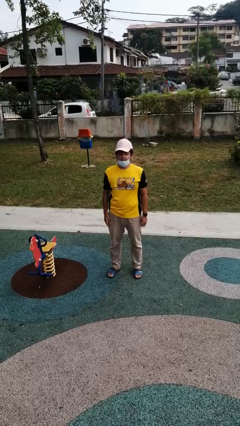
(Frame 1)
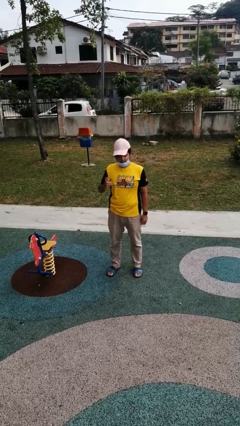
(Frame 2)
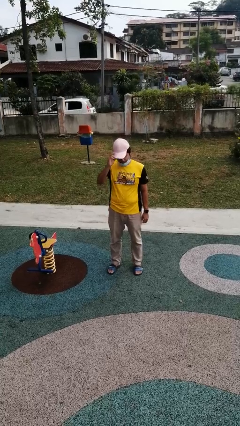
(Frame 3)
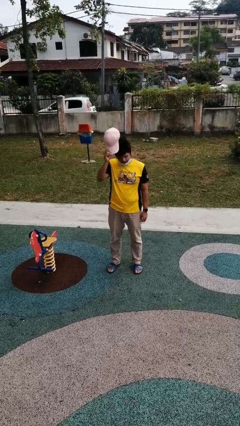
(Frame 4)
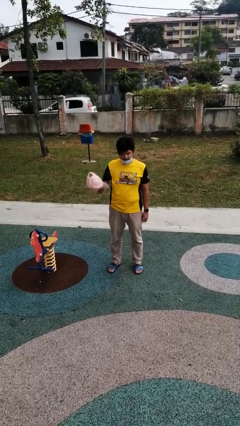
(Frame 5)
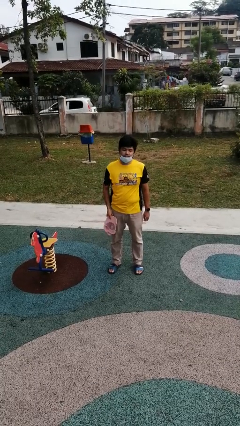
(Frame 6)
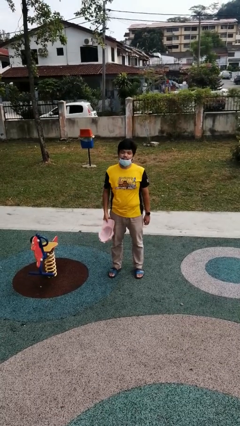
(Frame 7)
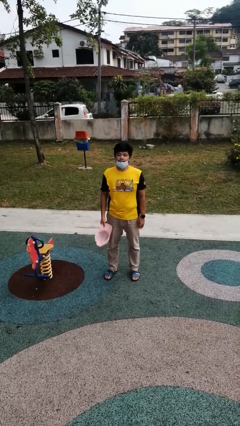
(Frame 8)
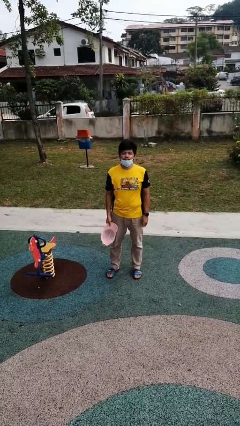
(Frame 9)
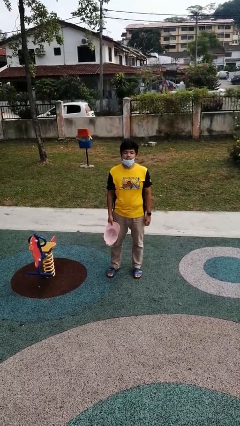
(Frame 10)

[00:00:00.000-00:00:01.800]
person takes off hat

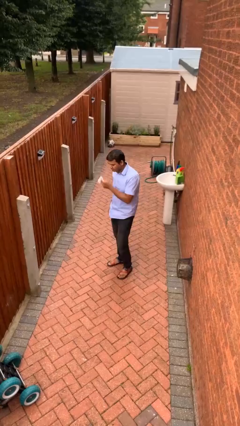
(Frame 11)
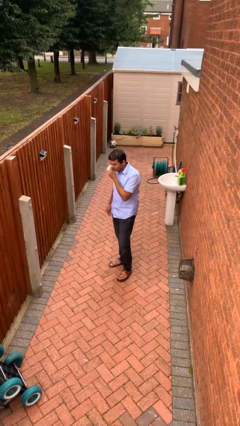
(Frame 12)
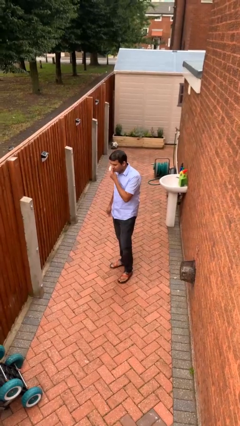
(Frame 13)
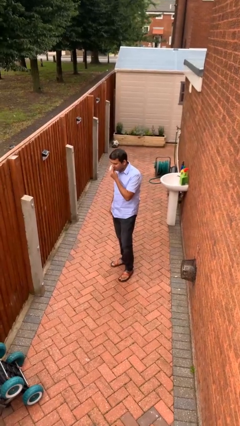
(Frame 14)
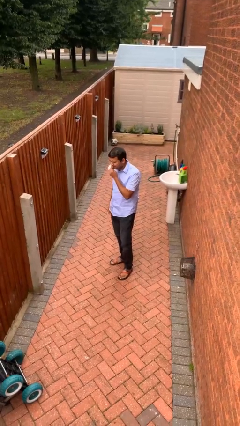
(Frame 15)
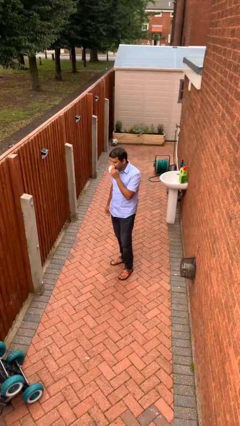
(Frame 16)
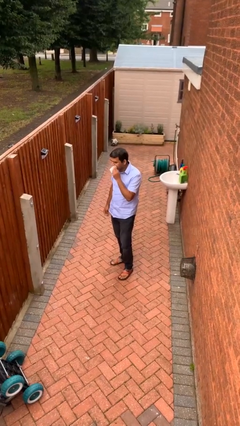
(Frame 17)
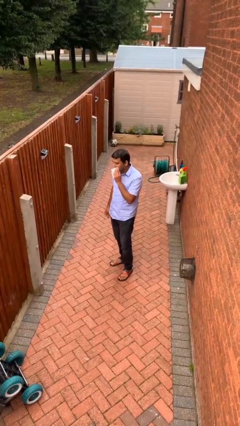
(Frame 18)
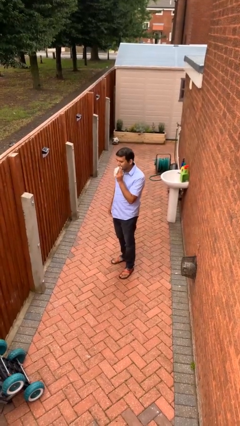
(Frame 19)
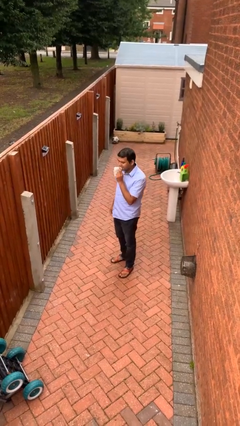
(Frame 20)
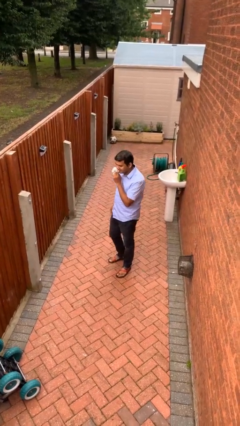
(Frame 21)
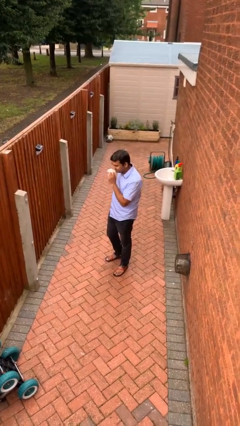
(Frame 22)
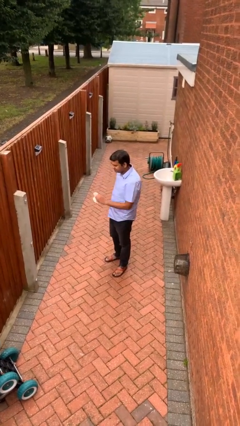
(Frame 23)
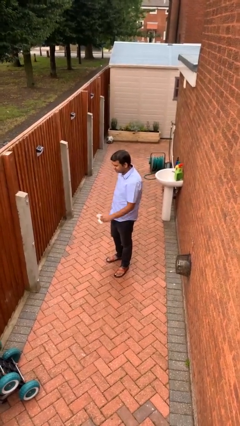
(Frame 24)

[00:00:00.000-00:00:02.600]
person wipes mouth with napkin

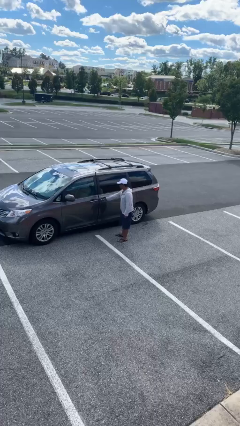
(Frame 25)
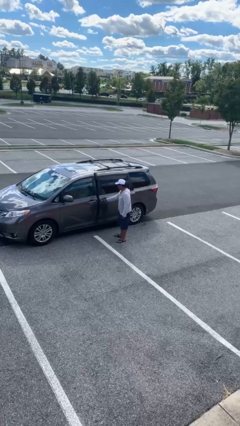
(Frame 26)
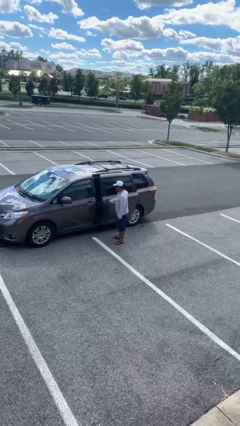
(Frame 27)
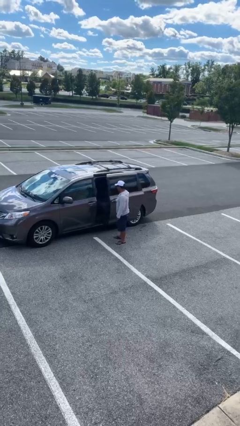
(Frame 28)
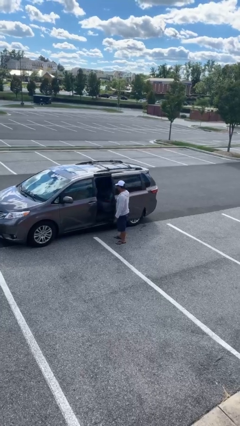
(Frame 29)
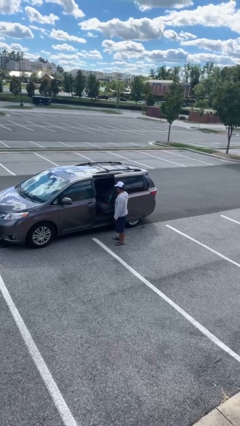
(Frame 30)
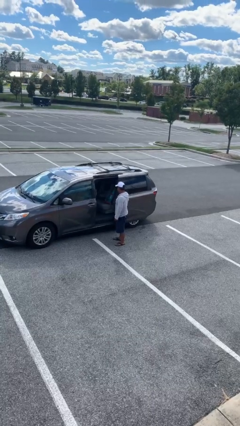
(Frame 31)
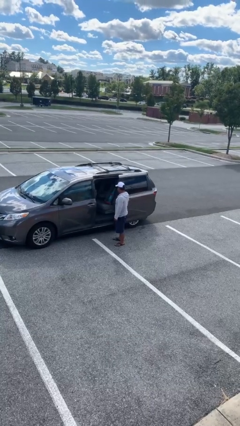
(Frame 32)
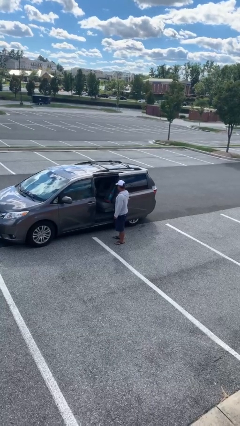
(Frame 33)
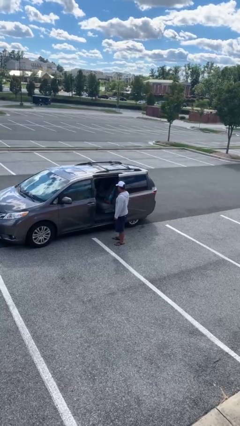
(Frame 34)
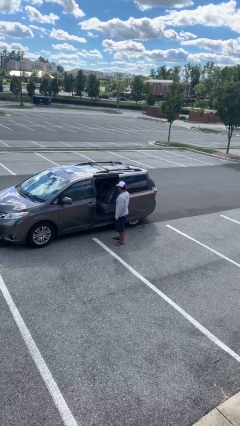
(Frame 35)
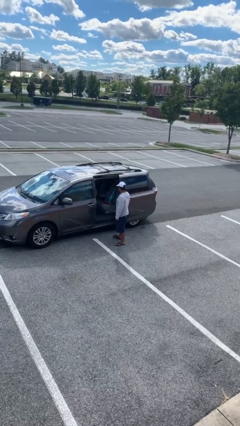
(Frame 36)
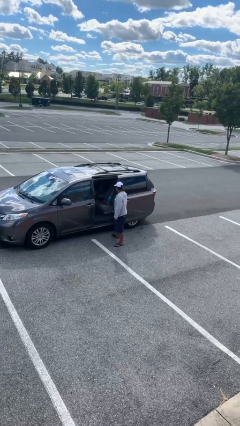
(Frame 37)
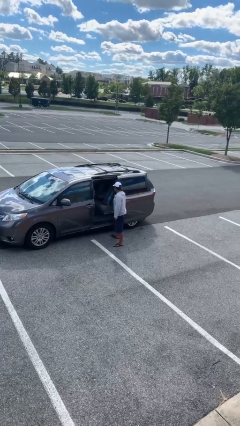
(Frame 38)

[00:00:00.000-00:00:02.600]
person opens car door

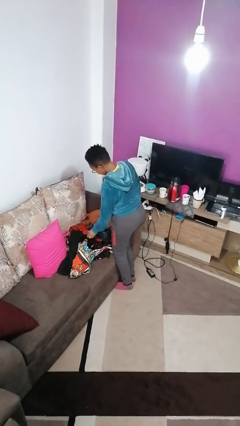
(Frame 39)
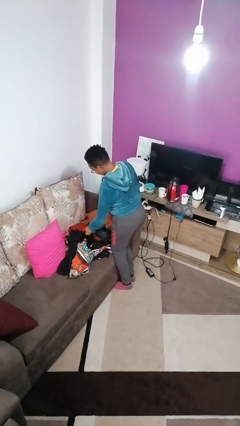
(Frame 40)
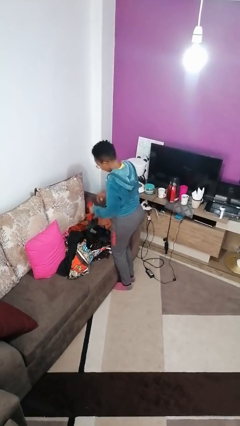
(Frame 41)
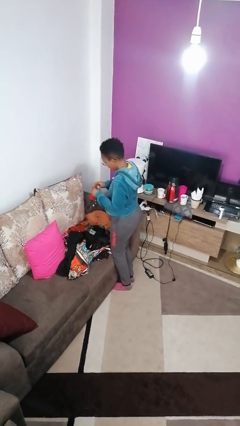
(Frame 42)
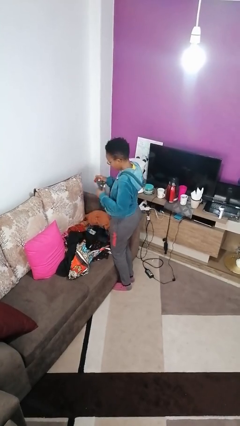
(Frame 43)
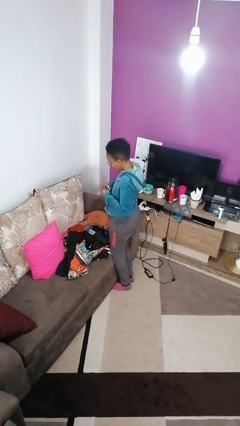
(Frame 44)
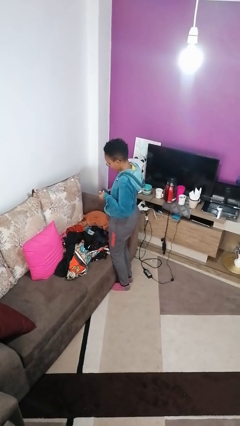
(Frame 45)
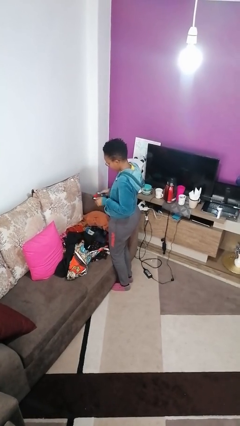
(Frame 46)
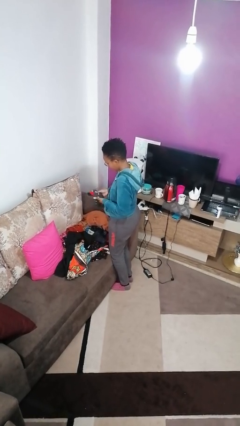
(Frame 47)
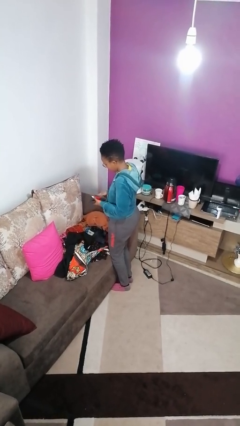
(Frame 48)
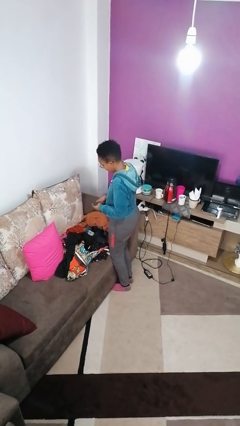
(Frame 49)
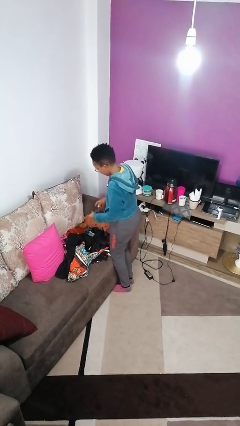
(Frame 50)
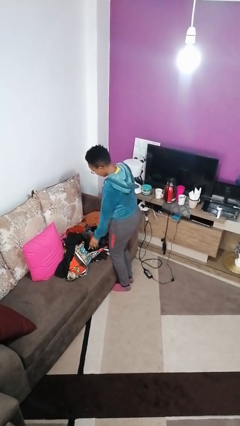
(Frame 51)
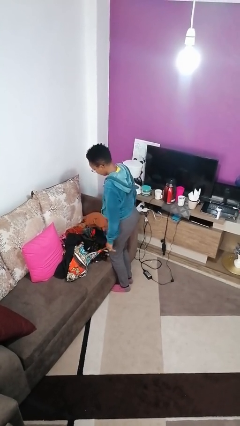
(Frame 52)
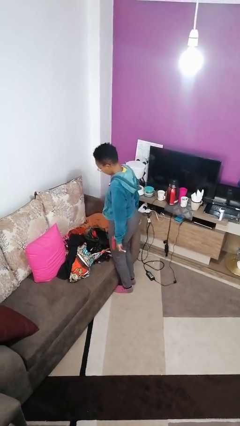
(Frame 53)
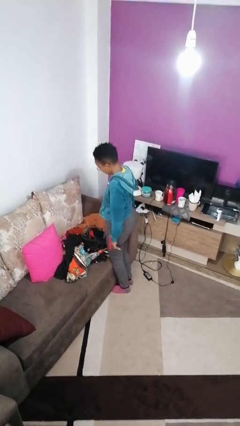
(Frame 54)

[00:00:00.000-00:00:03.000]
person folds socks

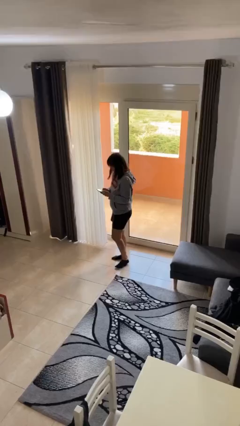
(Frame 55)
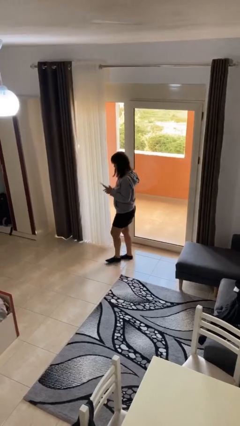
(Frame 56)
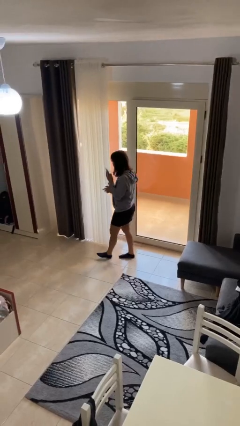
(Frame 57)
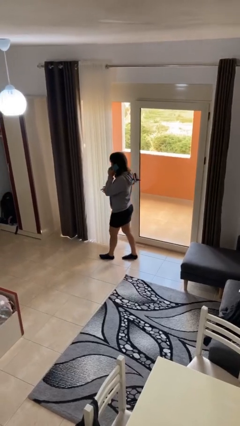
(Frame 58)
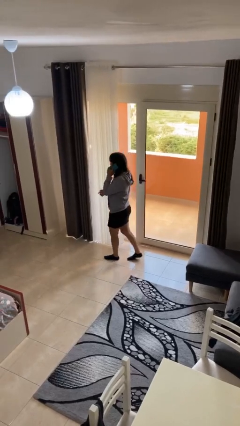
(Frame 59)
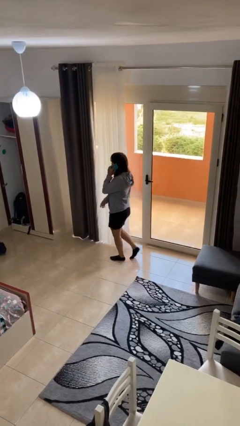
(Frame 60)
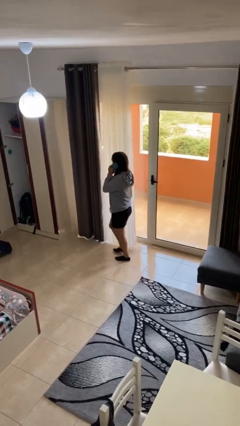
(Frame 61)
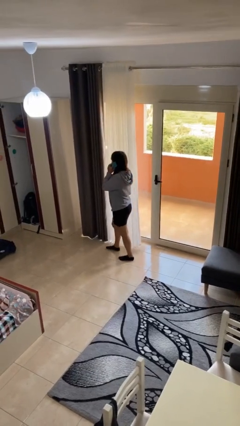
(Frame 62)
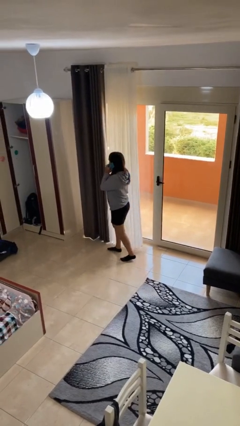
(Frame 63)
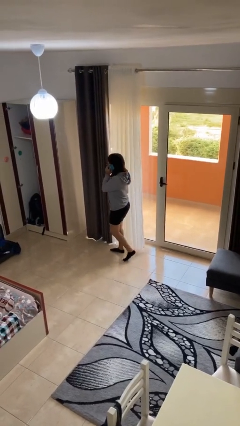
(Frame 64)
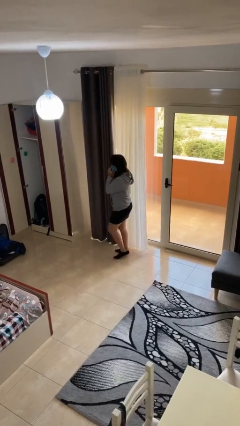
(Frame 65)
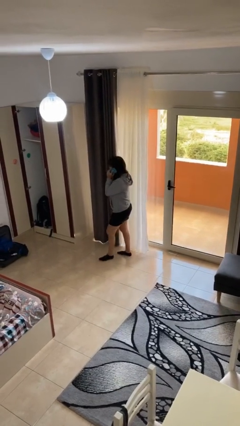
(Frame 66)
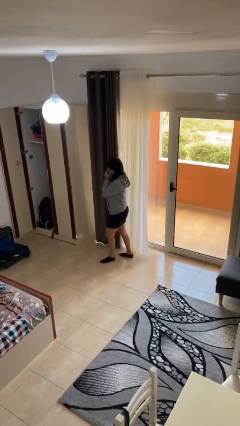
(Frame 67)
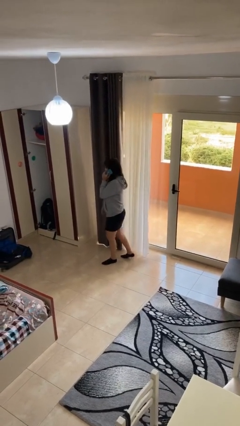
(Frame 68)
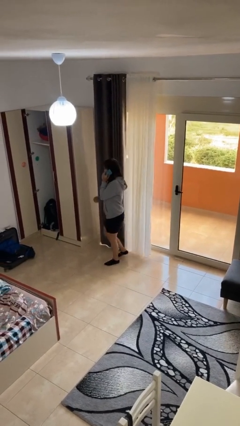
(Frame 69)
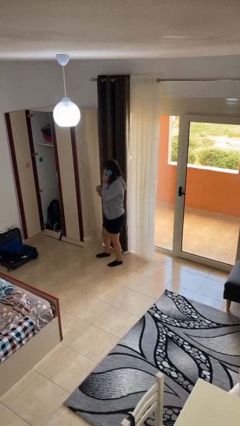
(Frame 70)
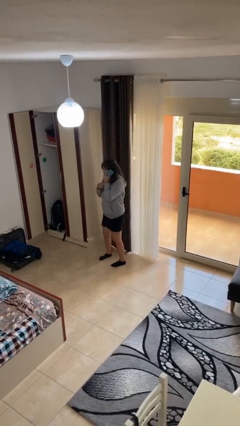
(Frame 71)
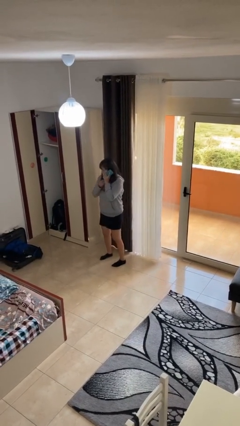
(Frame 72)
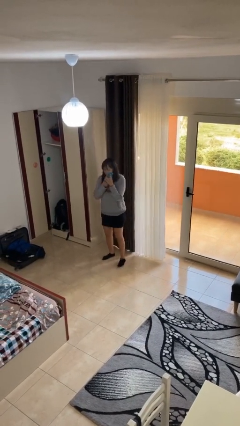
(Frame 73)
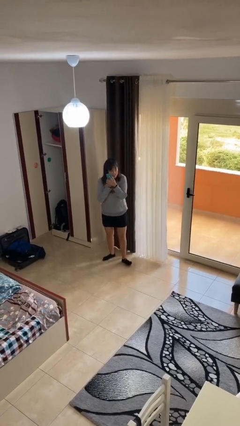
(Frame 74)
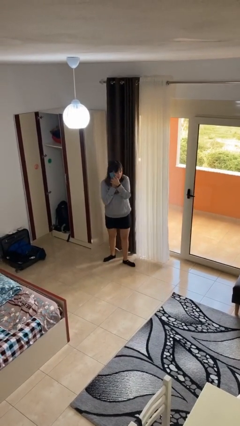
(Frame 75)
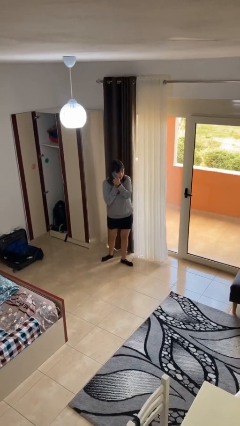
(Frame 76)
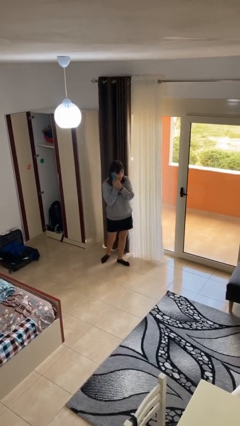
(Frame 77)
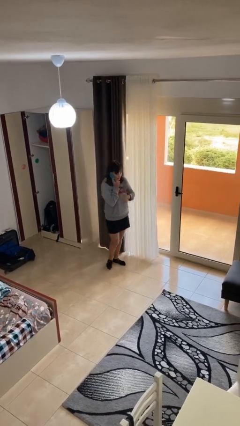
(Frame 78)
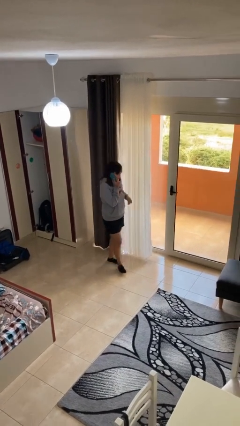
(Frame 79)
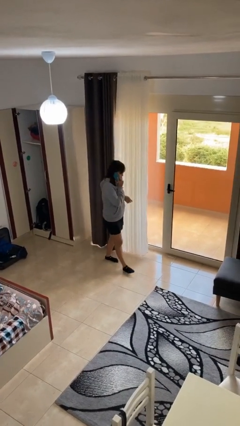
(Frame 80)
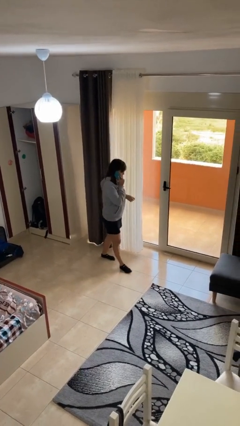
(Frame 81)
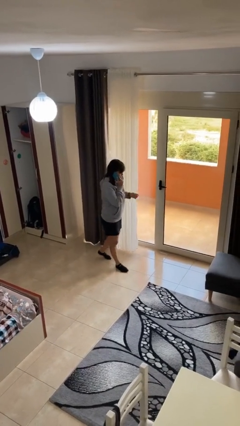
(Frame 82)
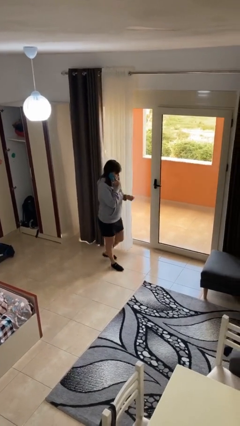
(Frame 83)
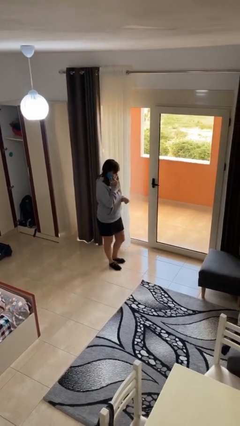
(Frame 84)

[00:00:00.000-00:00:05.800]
person talks on phone

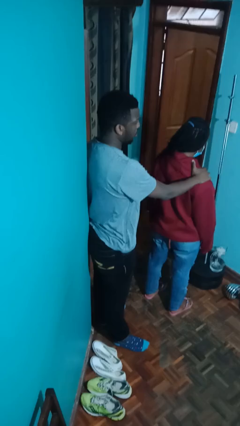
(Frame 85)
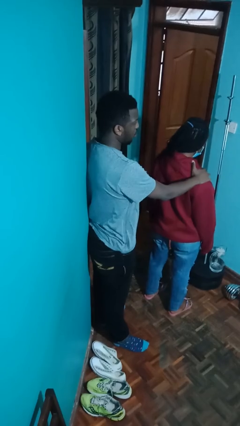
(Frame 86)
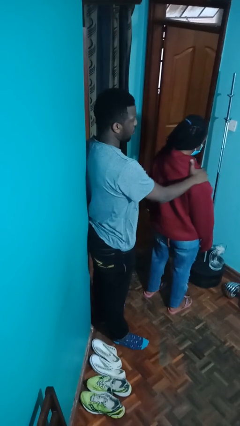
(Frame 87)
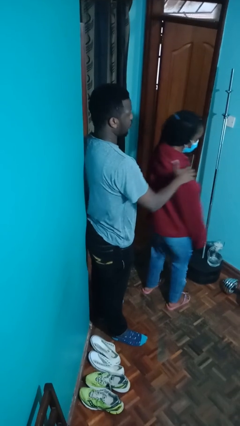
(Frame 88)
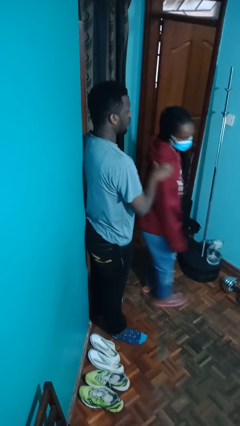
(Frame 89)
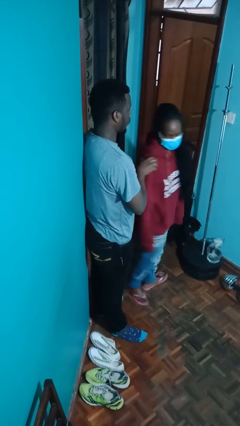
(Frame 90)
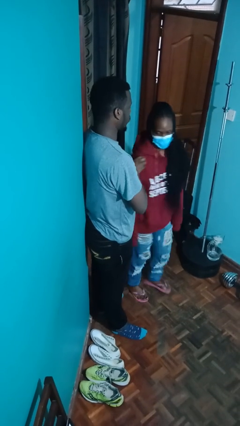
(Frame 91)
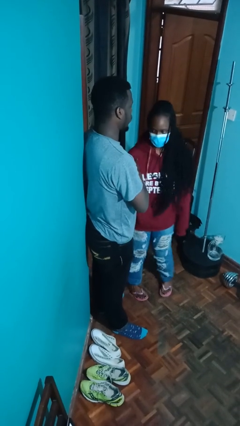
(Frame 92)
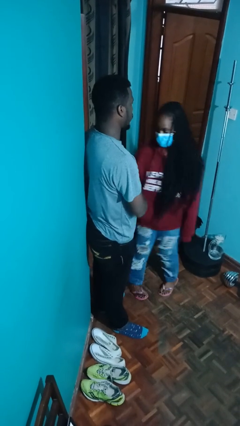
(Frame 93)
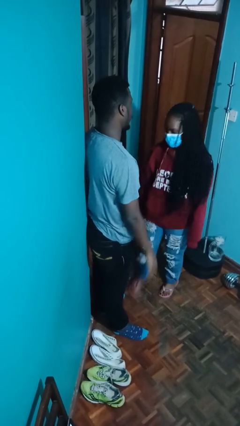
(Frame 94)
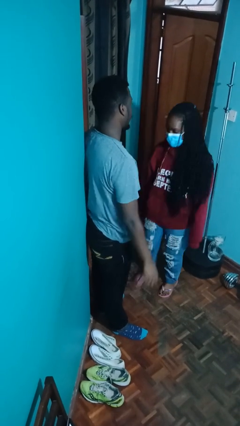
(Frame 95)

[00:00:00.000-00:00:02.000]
person spins person around
